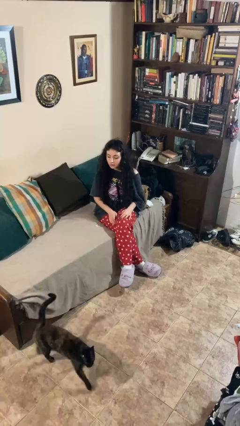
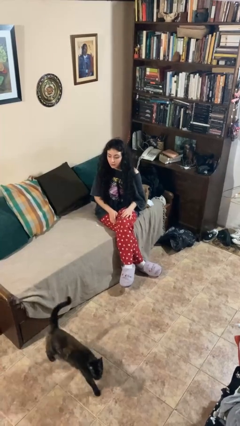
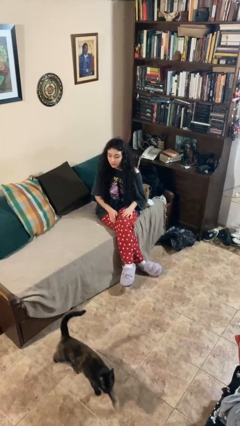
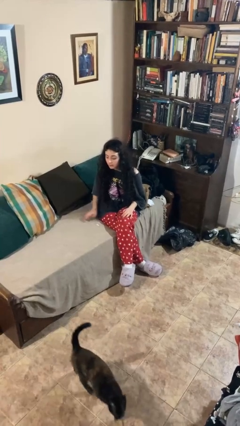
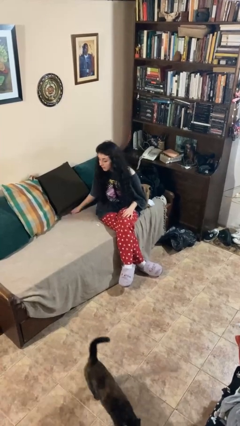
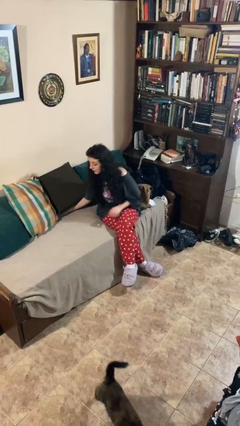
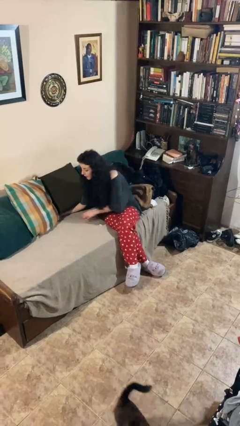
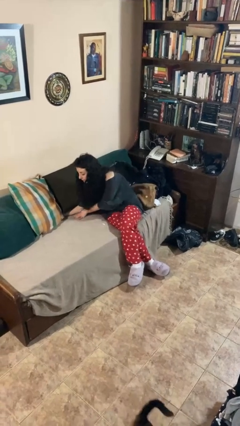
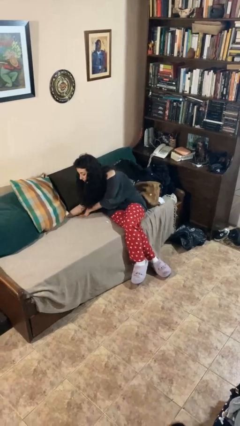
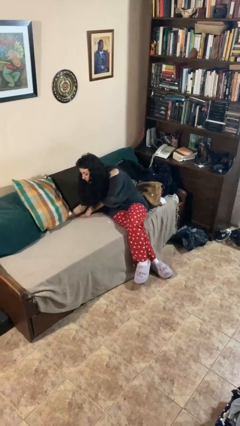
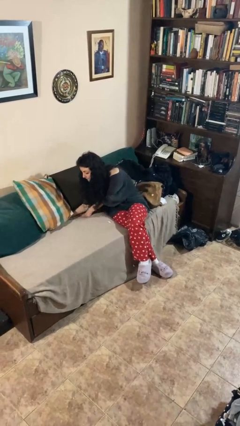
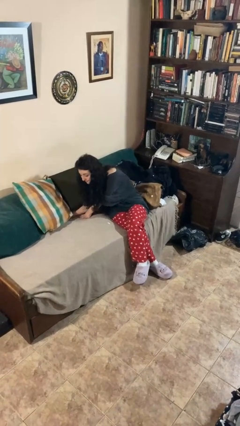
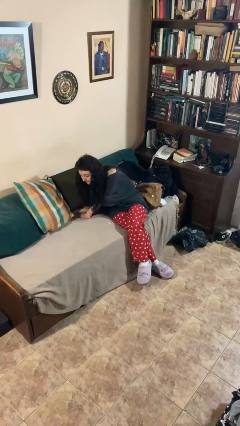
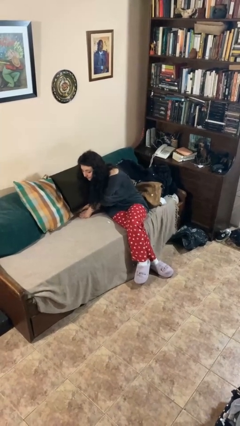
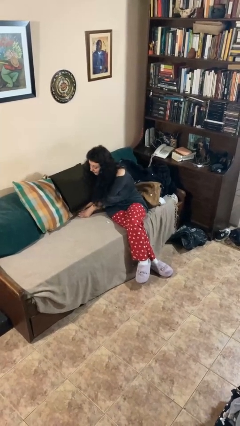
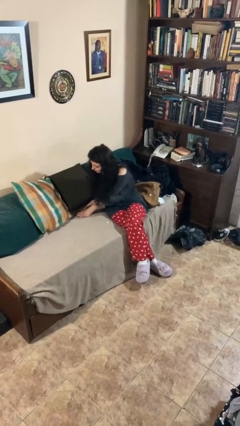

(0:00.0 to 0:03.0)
person searches in couch

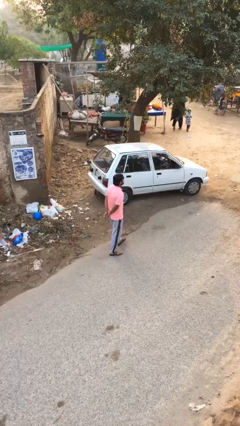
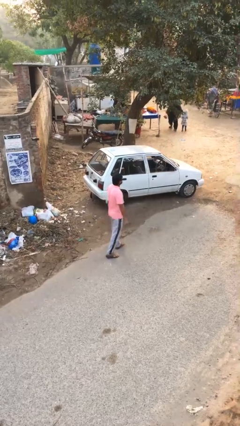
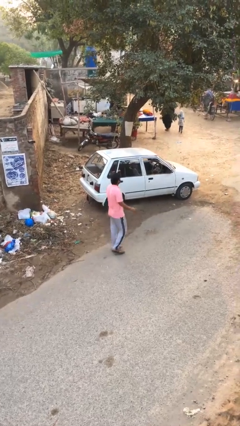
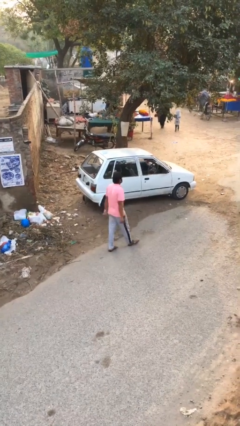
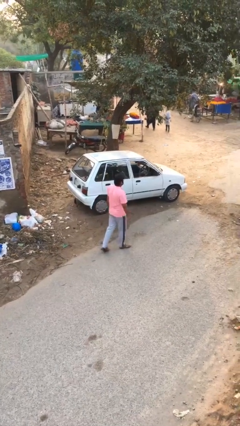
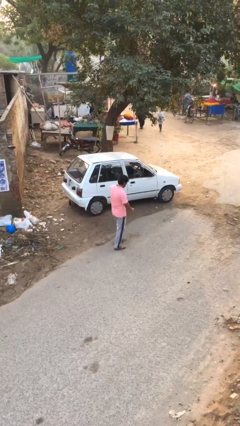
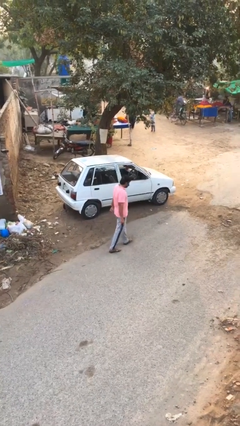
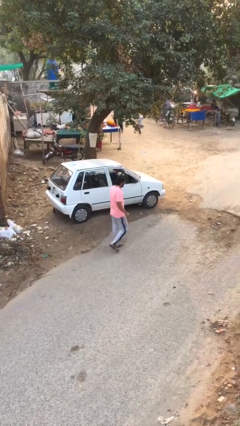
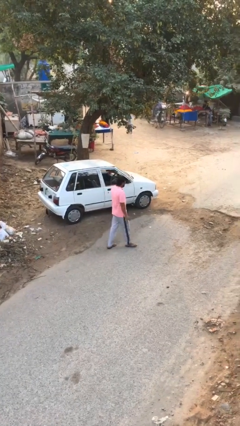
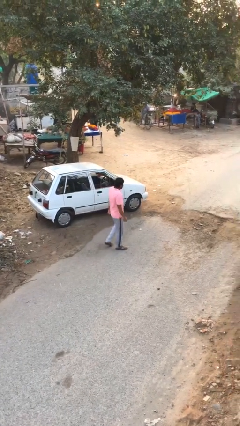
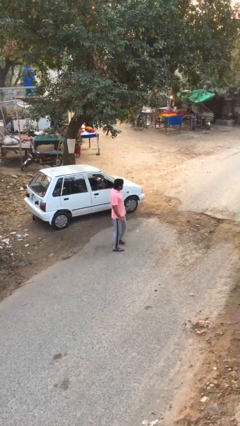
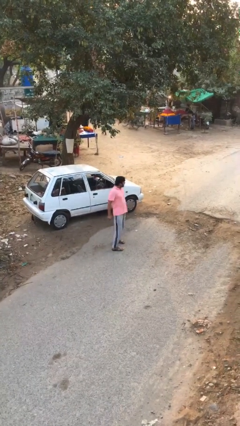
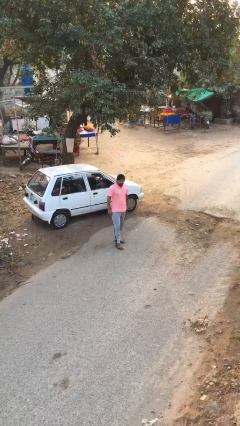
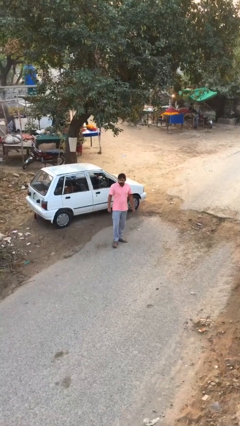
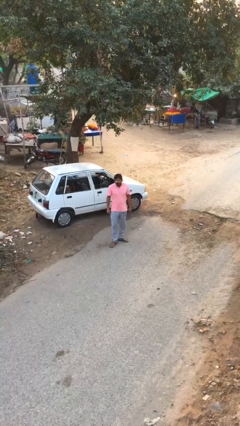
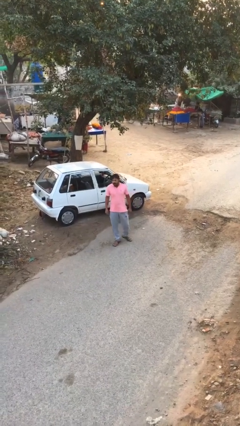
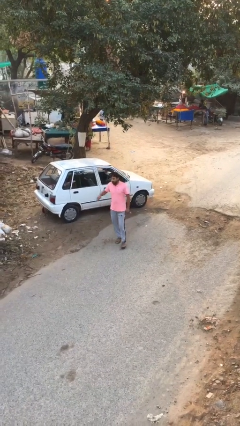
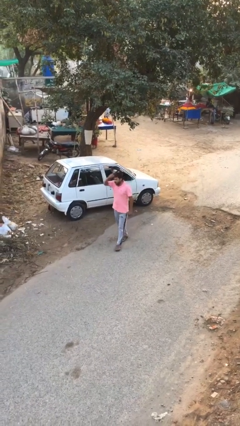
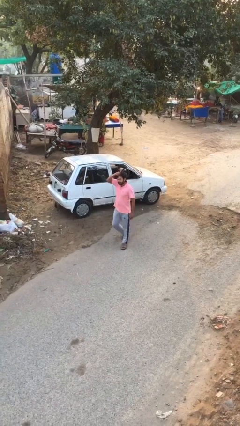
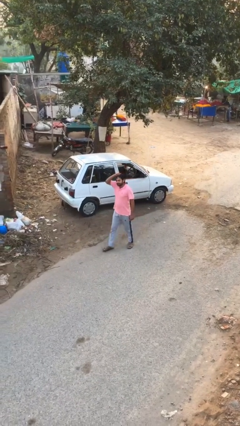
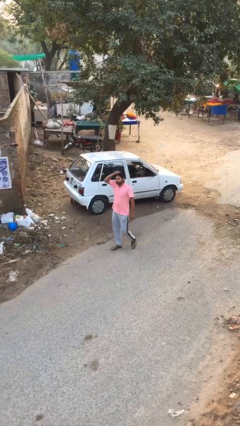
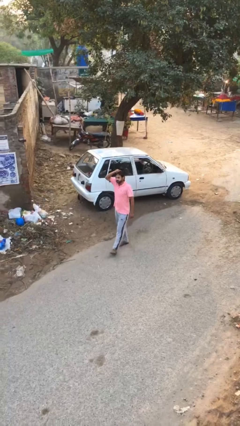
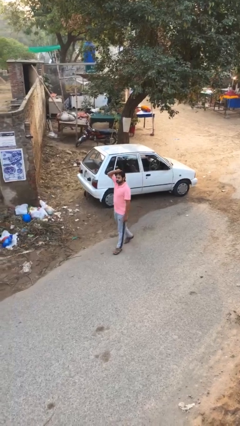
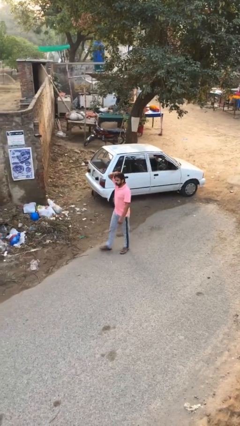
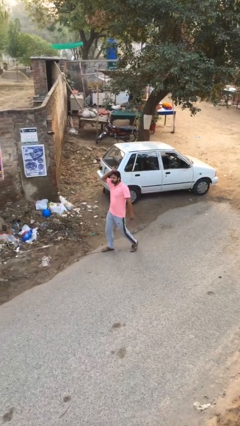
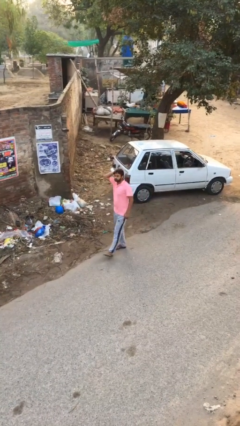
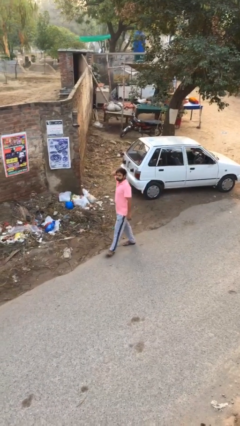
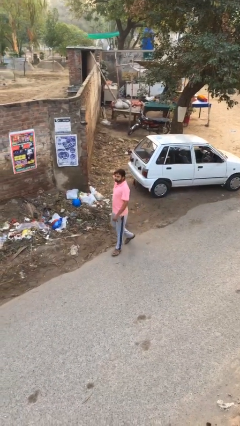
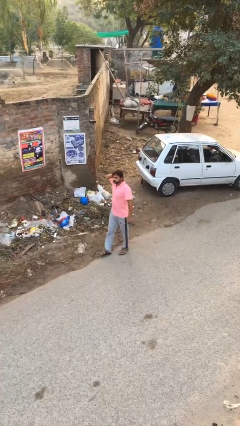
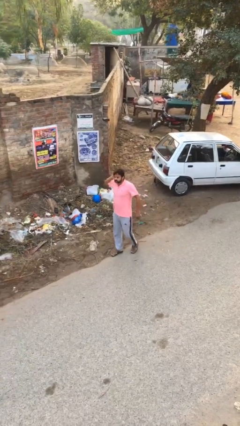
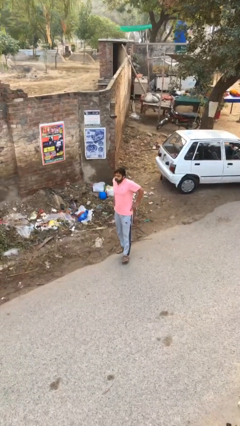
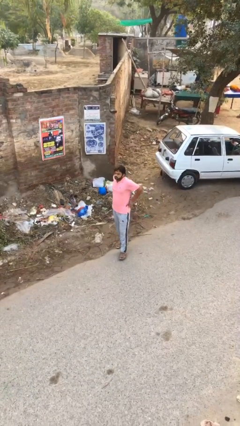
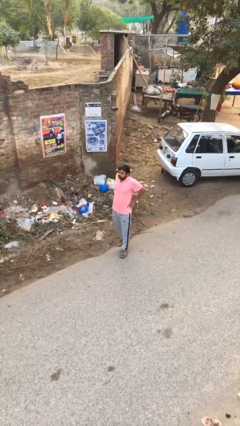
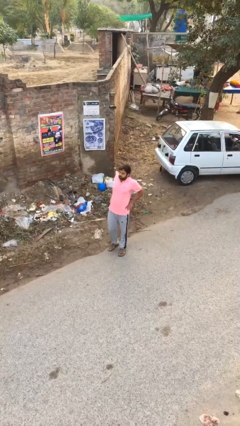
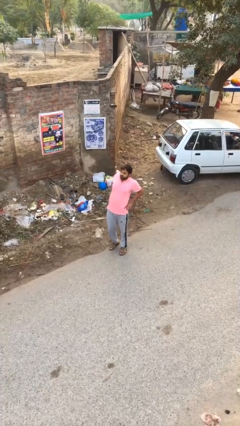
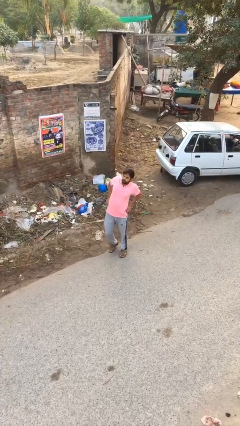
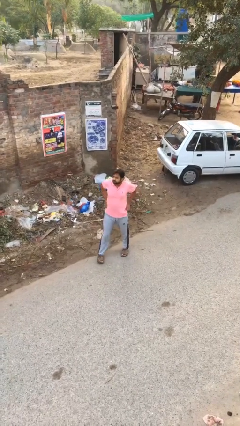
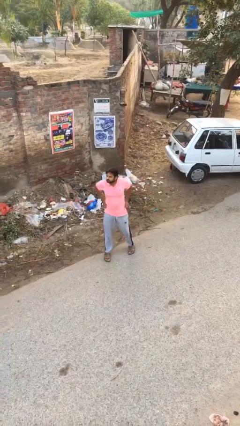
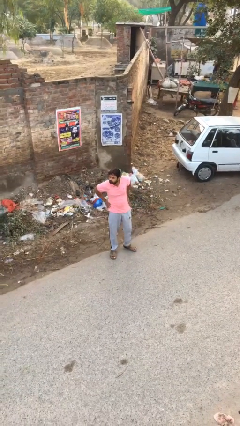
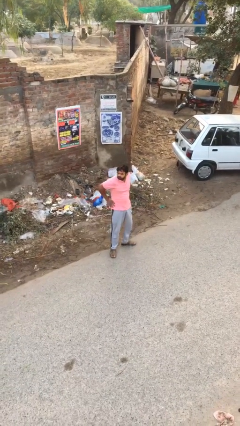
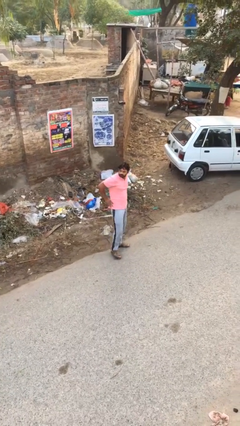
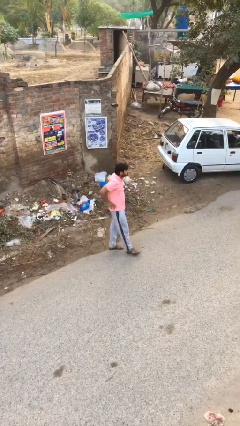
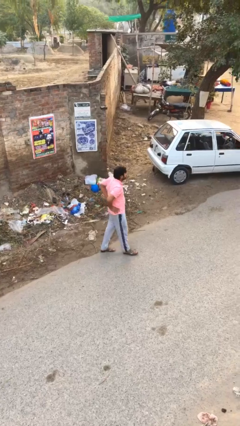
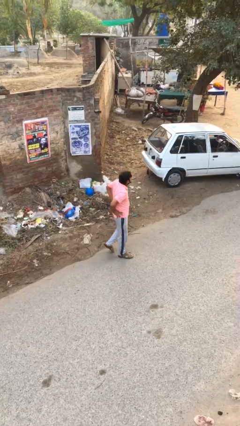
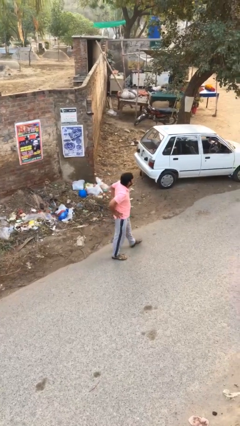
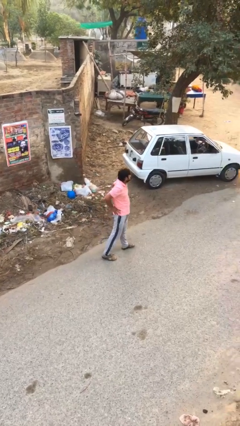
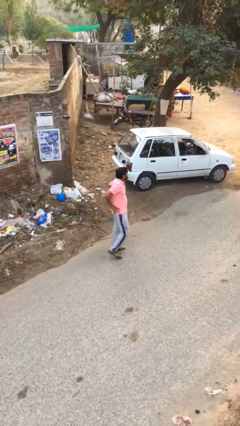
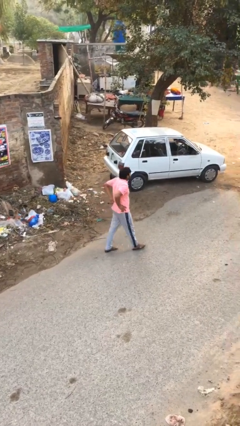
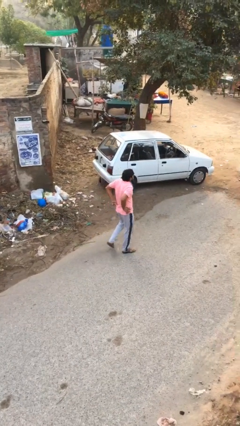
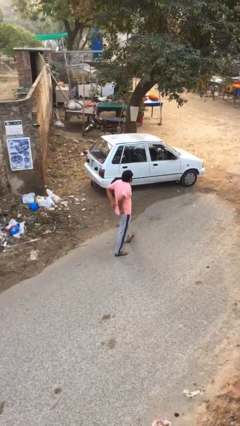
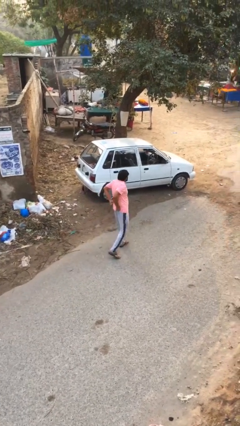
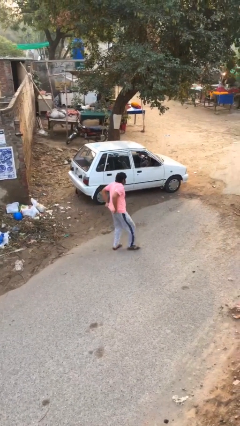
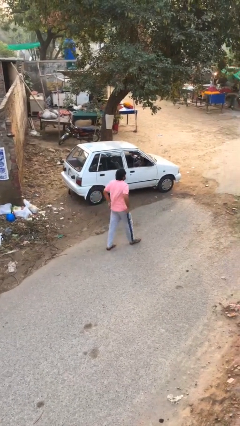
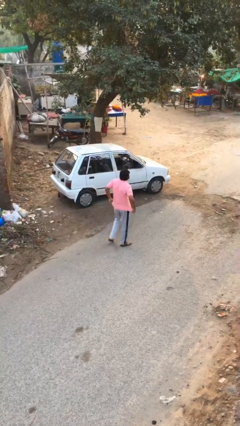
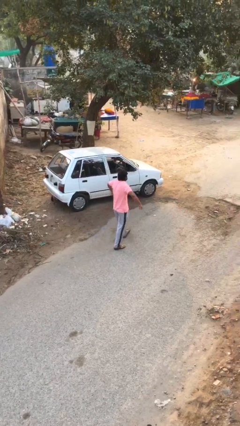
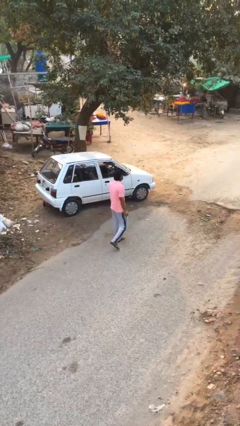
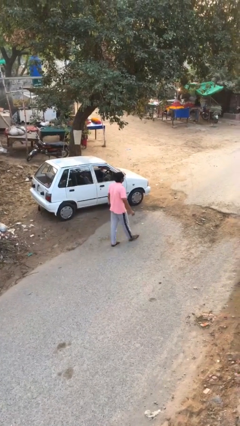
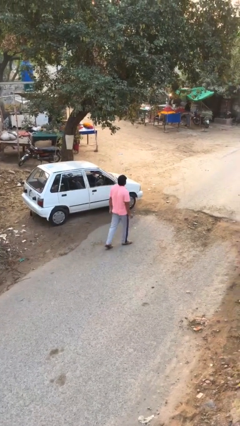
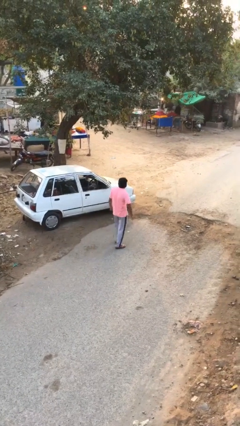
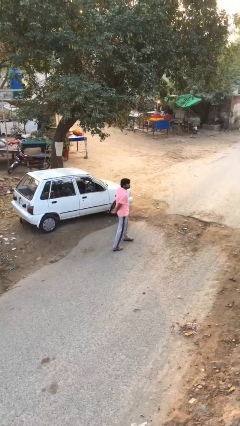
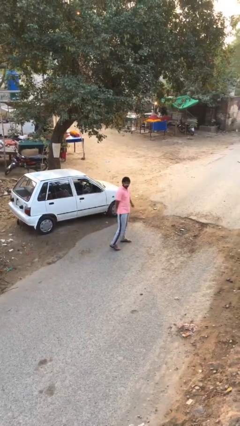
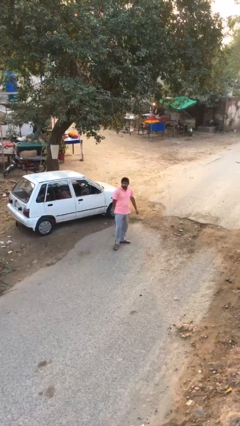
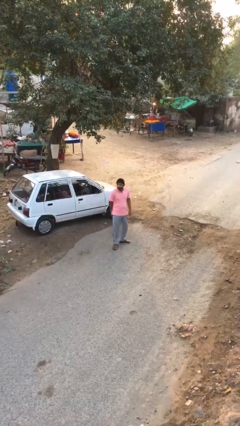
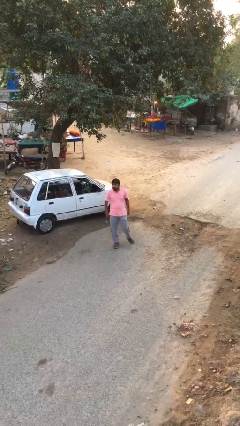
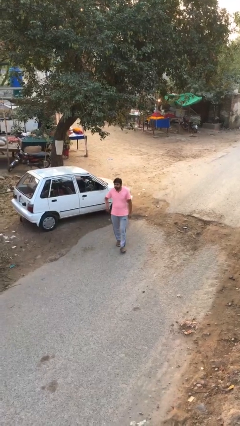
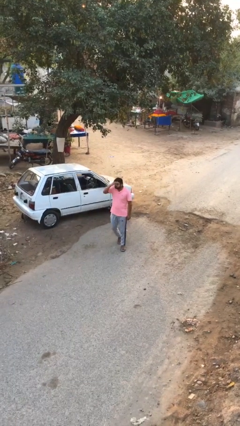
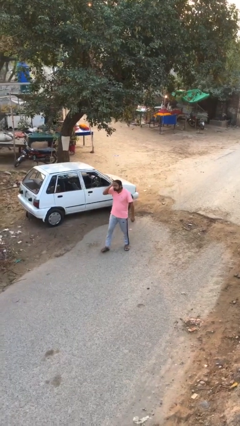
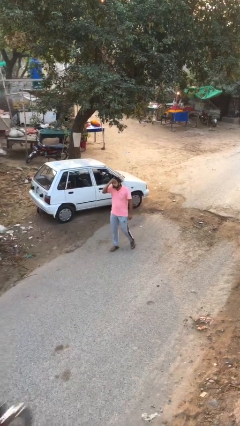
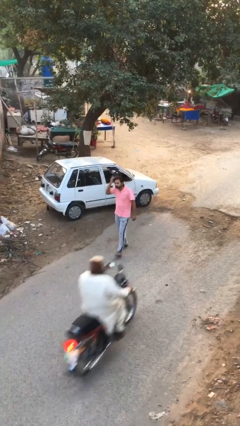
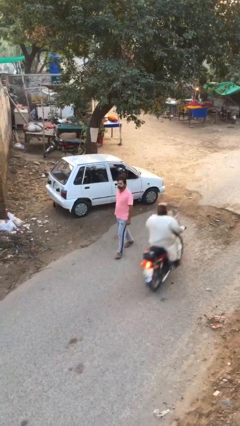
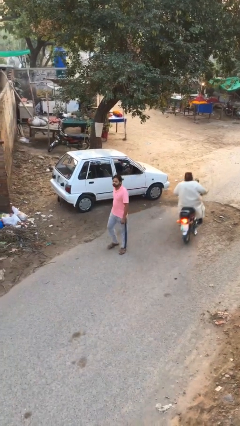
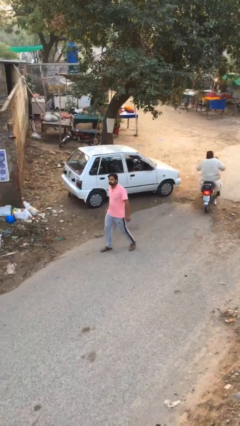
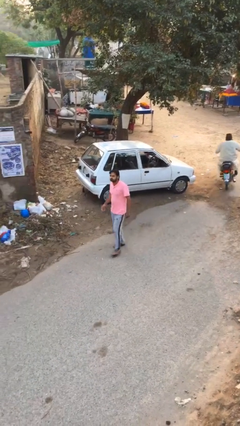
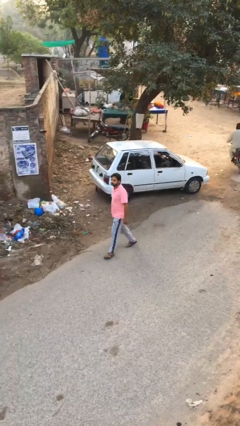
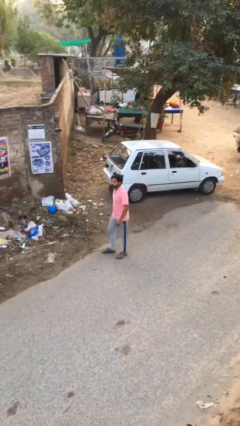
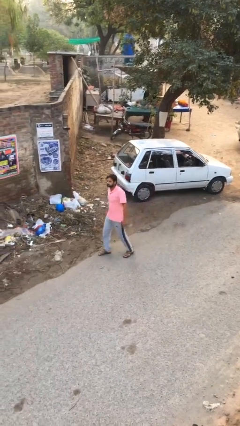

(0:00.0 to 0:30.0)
person walks
